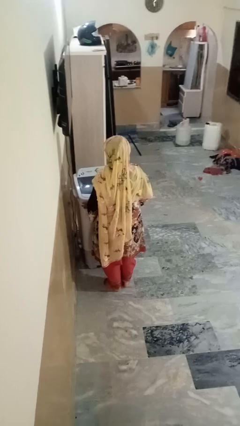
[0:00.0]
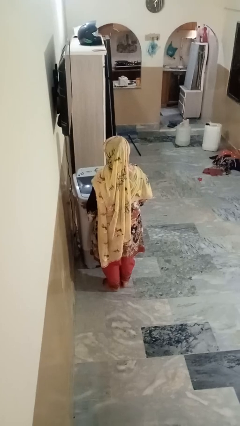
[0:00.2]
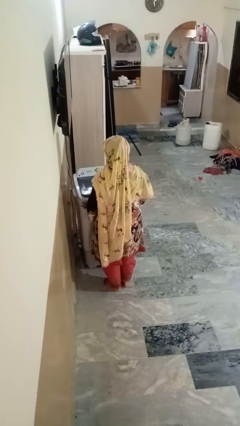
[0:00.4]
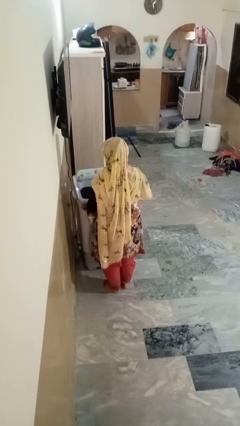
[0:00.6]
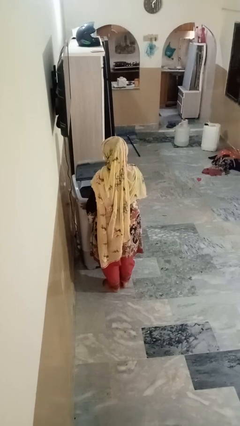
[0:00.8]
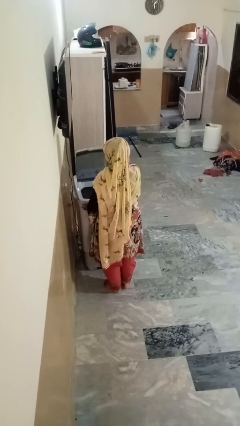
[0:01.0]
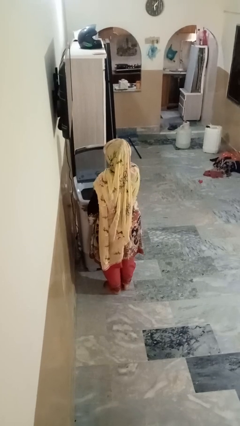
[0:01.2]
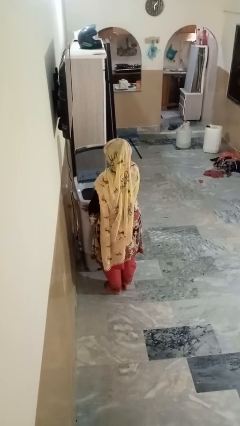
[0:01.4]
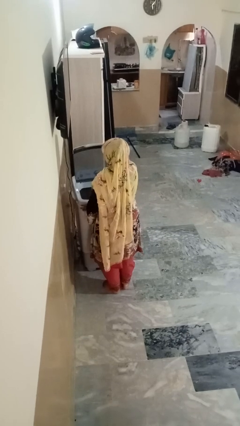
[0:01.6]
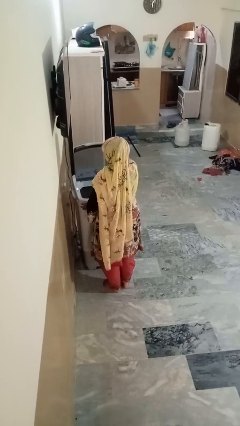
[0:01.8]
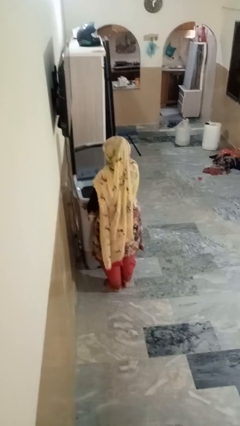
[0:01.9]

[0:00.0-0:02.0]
person opens clothes washer

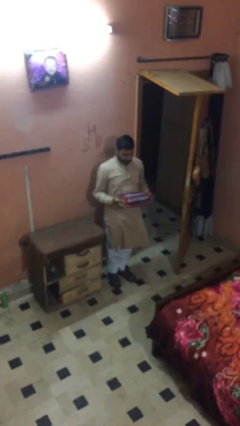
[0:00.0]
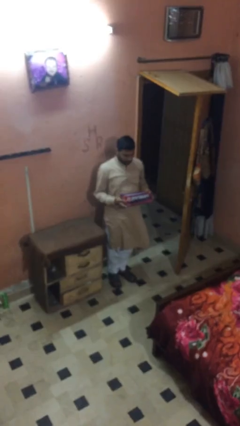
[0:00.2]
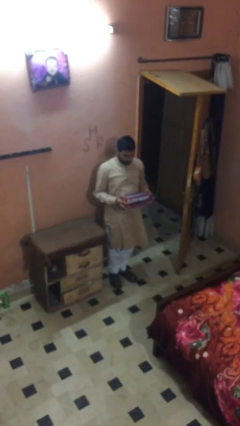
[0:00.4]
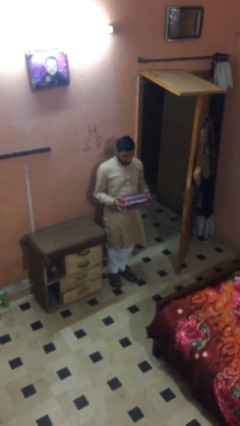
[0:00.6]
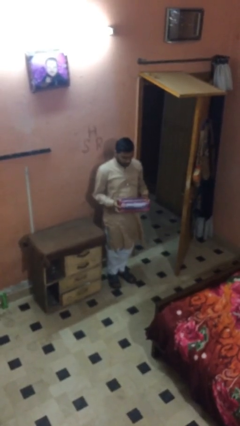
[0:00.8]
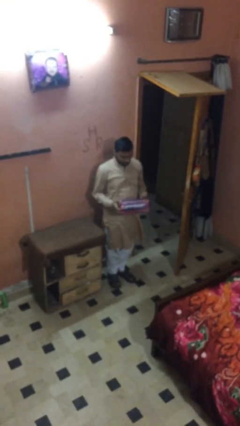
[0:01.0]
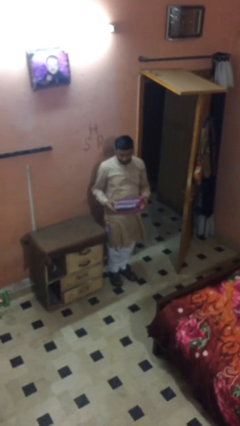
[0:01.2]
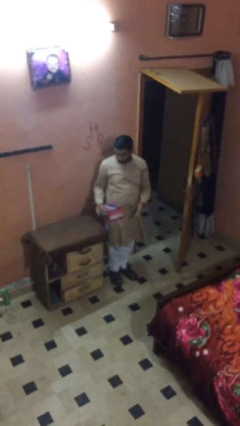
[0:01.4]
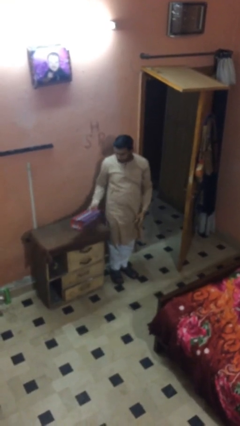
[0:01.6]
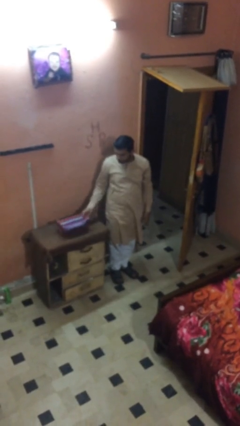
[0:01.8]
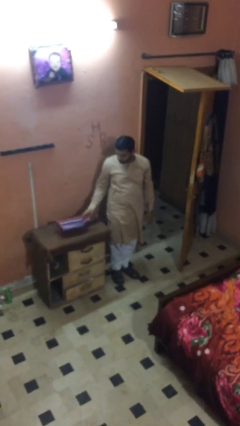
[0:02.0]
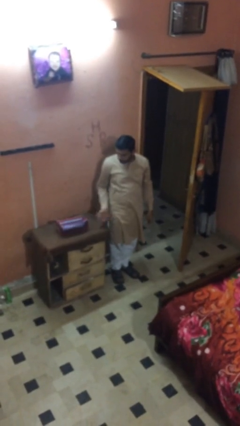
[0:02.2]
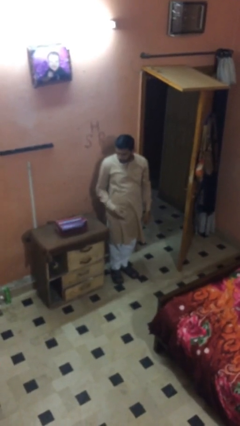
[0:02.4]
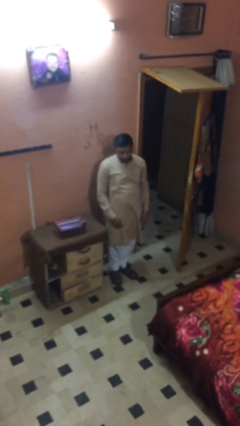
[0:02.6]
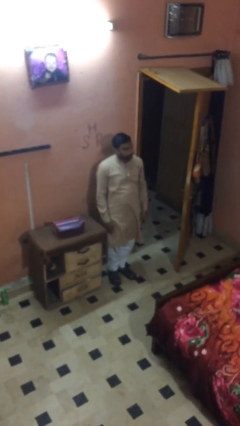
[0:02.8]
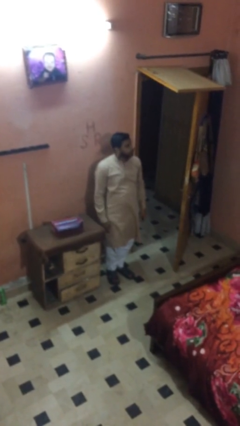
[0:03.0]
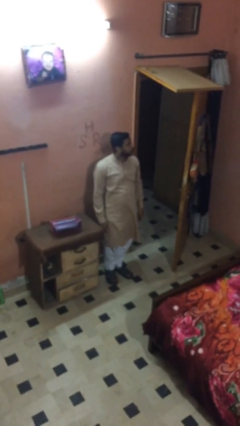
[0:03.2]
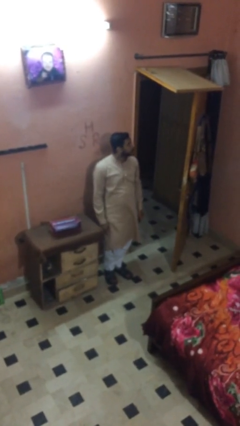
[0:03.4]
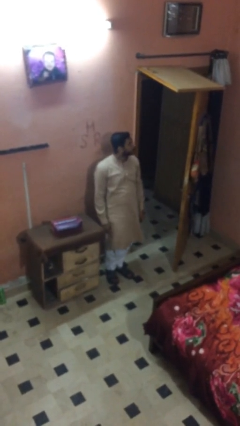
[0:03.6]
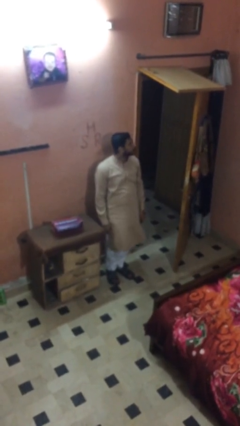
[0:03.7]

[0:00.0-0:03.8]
person puts down object on table

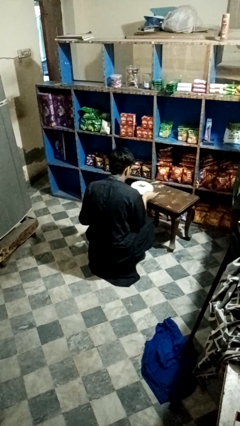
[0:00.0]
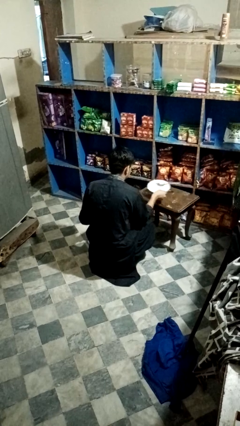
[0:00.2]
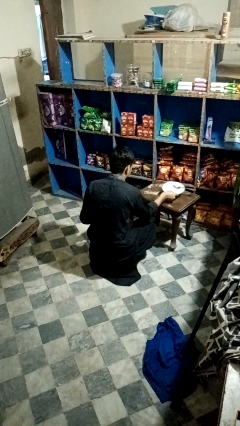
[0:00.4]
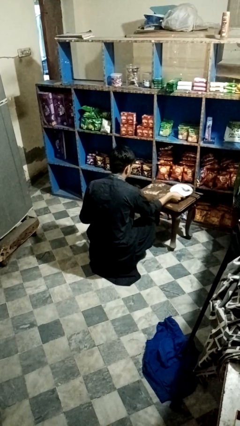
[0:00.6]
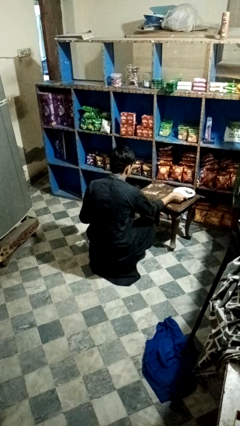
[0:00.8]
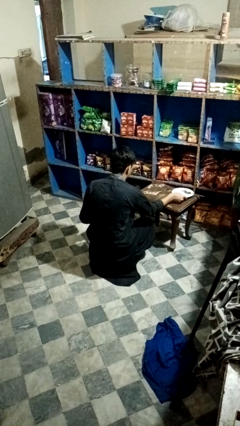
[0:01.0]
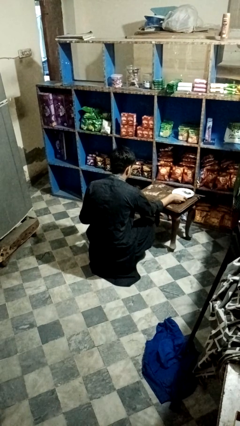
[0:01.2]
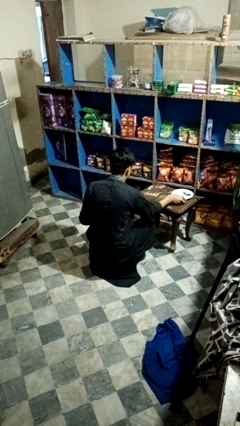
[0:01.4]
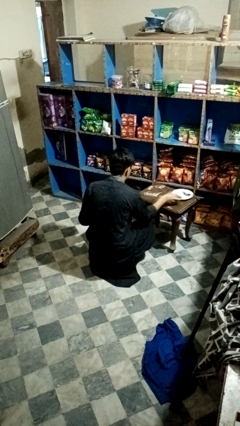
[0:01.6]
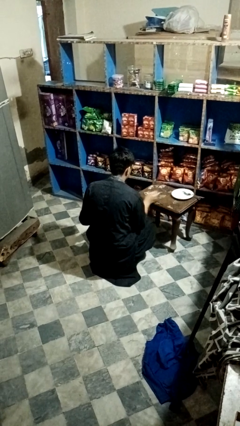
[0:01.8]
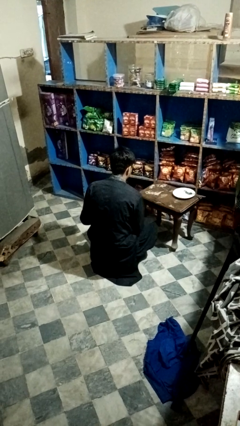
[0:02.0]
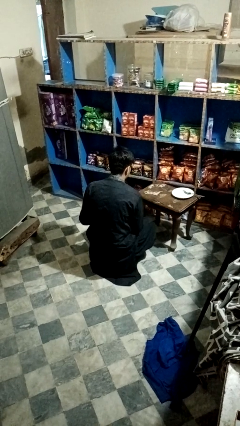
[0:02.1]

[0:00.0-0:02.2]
person sets table

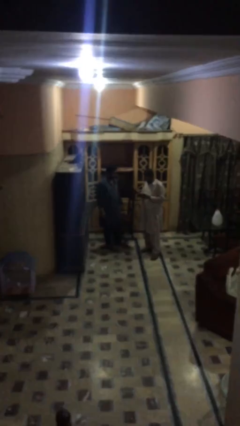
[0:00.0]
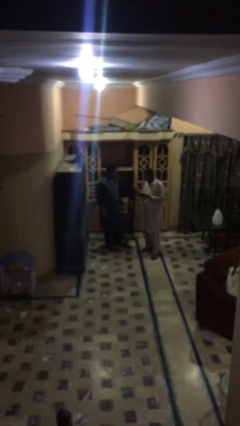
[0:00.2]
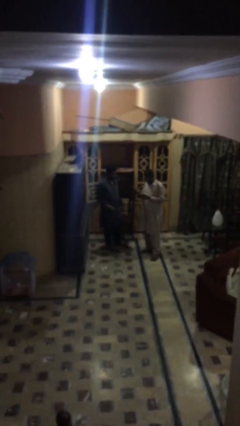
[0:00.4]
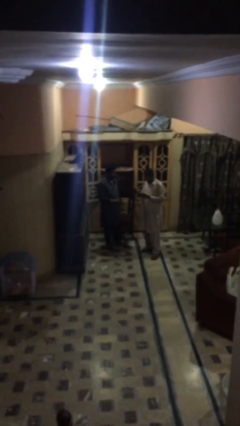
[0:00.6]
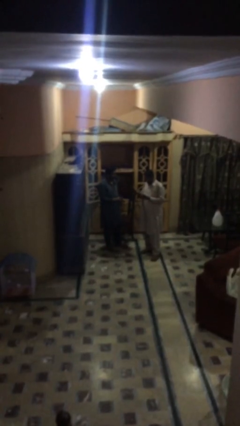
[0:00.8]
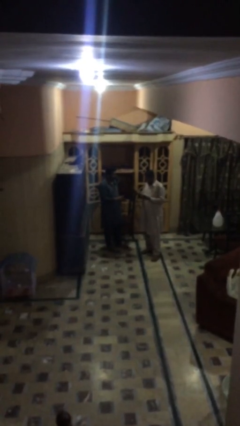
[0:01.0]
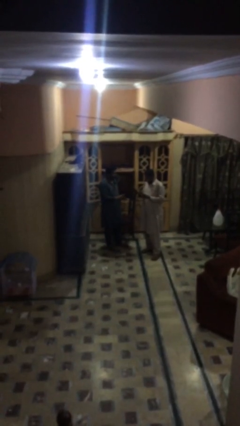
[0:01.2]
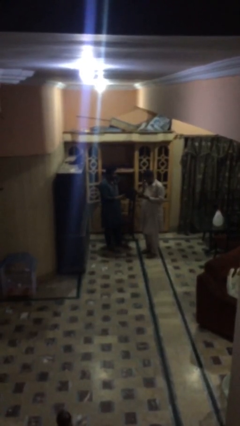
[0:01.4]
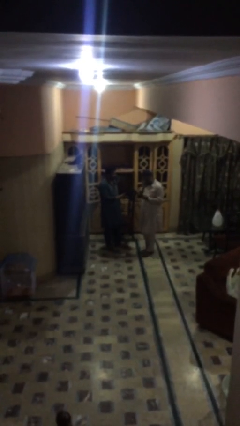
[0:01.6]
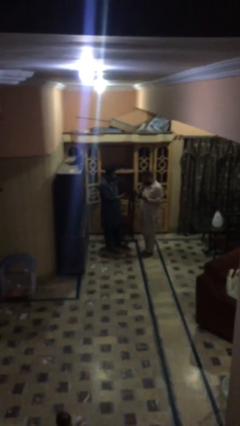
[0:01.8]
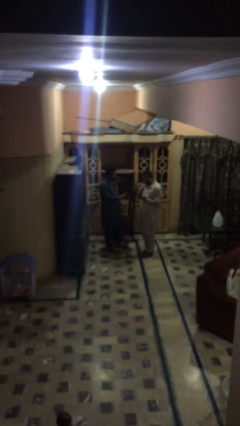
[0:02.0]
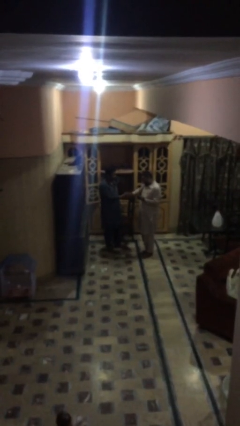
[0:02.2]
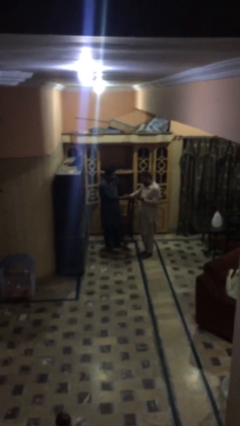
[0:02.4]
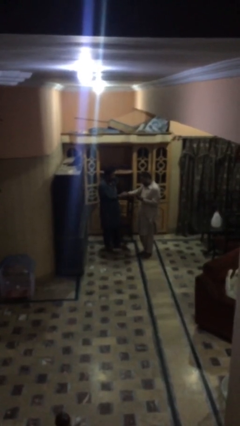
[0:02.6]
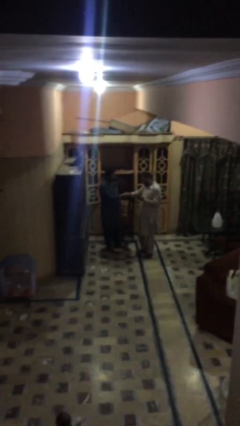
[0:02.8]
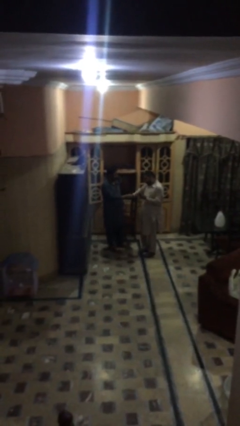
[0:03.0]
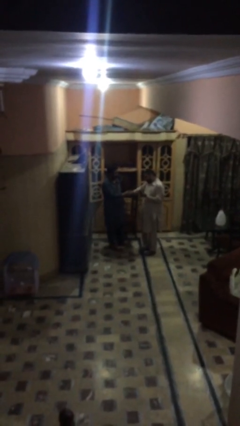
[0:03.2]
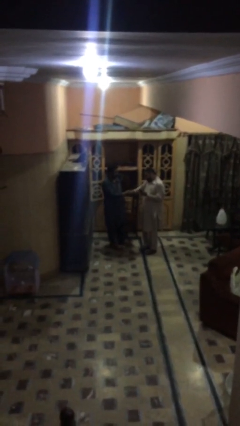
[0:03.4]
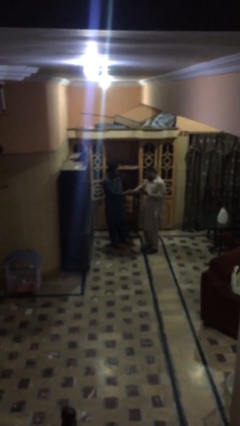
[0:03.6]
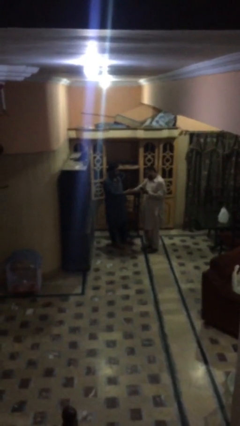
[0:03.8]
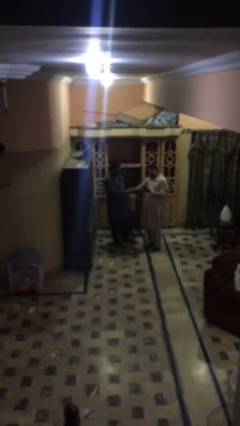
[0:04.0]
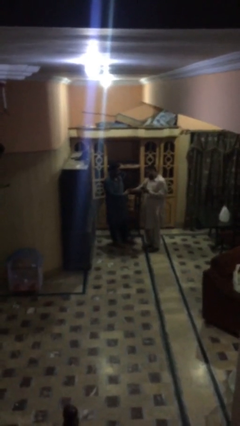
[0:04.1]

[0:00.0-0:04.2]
person shakes hand

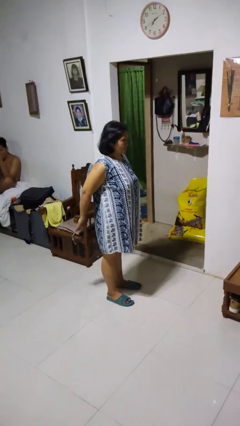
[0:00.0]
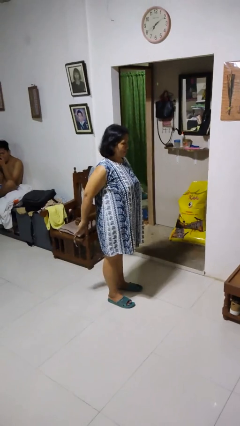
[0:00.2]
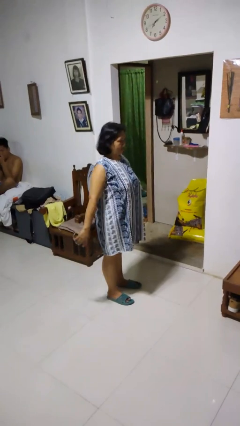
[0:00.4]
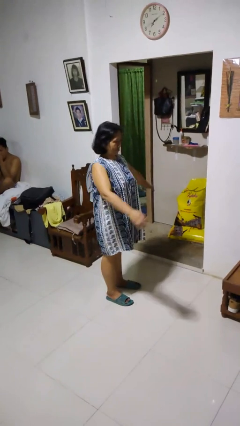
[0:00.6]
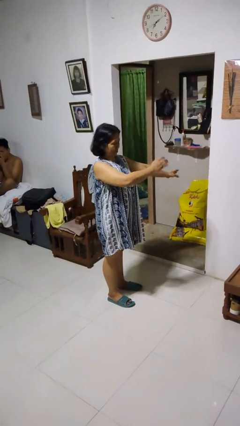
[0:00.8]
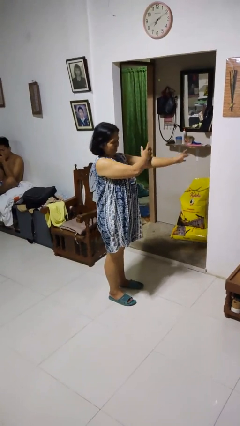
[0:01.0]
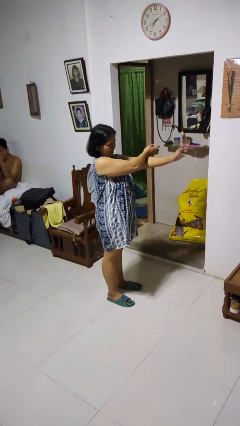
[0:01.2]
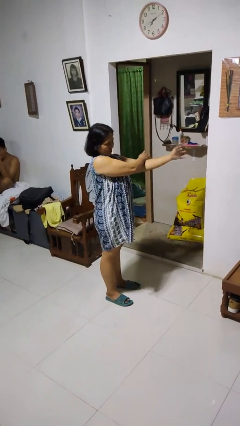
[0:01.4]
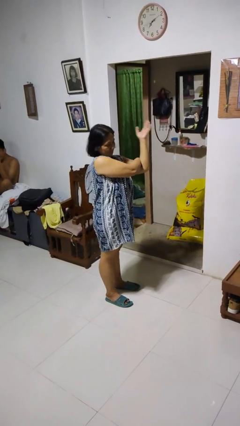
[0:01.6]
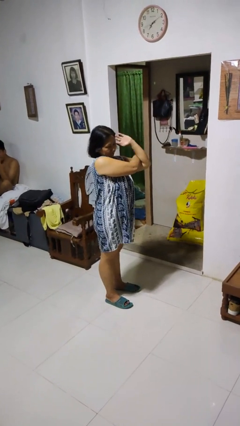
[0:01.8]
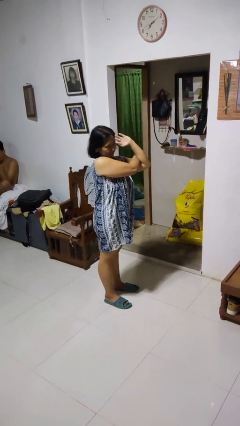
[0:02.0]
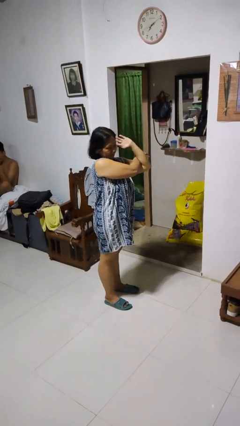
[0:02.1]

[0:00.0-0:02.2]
person stretches arms to side

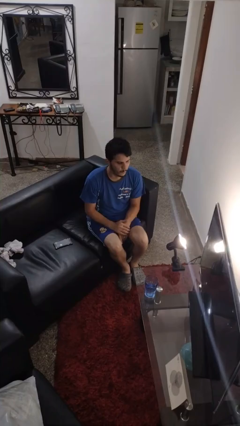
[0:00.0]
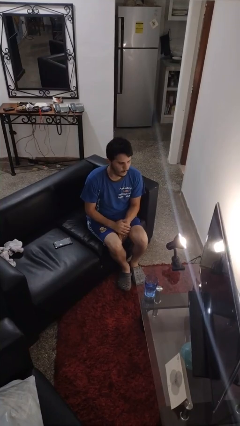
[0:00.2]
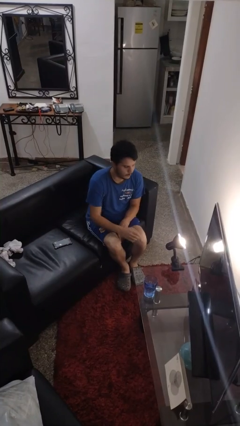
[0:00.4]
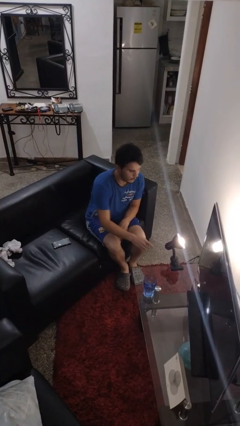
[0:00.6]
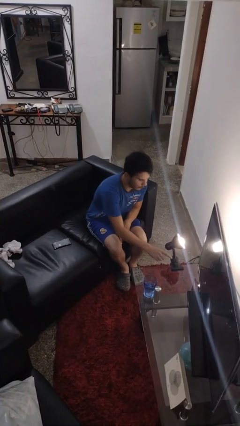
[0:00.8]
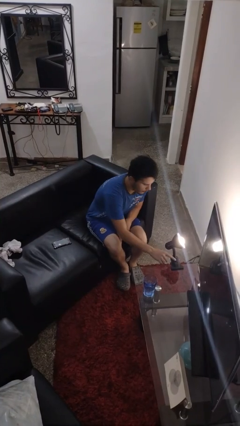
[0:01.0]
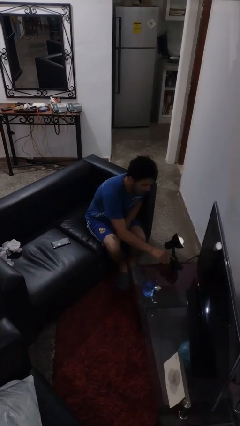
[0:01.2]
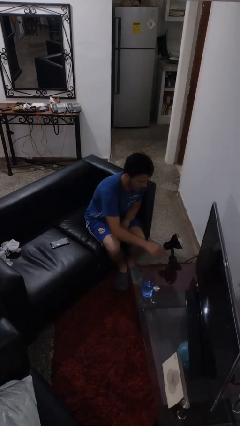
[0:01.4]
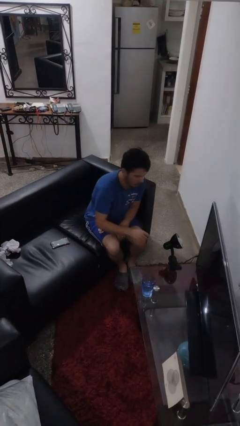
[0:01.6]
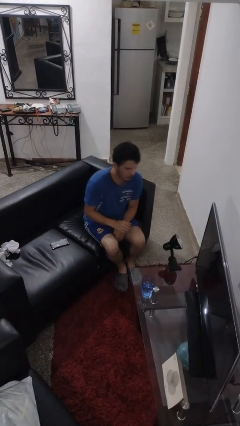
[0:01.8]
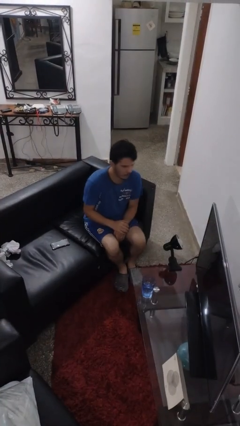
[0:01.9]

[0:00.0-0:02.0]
person turns off lamp

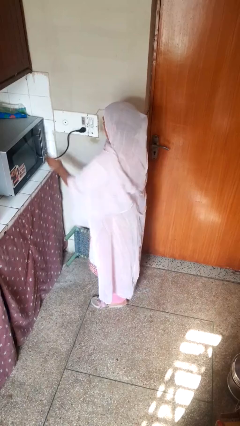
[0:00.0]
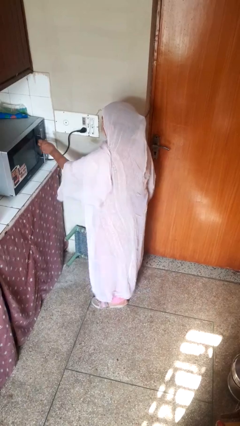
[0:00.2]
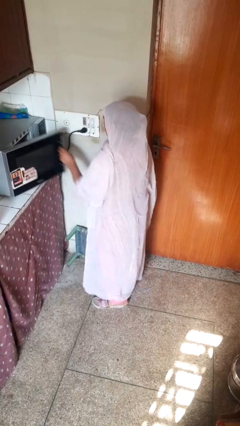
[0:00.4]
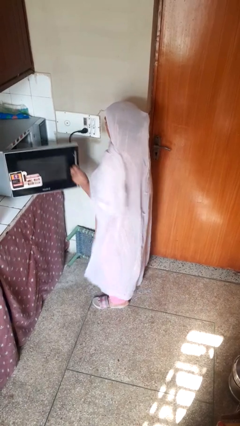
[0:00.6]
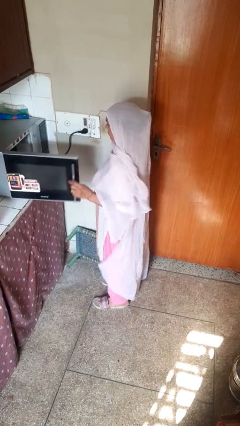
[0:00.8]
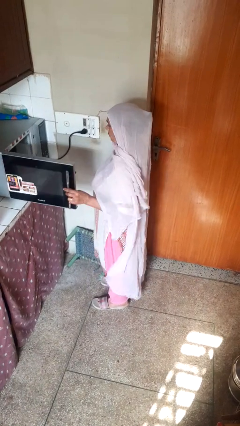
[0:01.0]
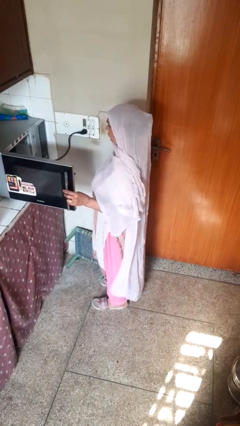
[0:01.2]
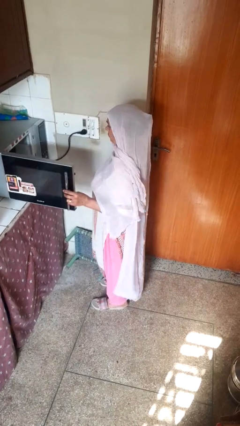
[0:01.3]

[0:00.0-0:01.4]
person opens oven door
